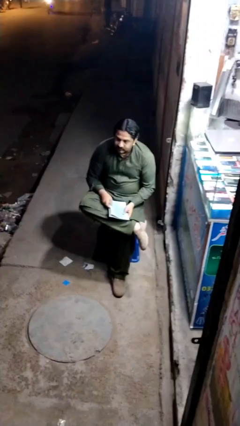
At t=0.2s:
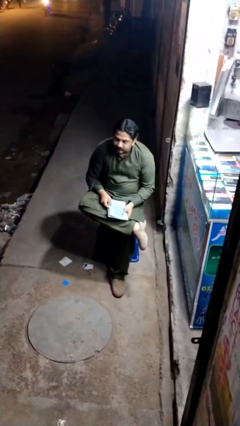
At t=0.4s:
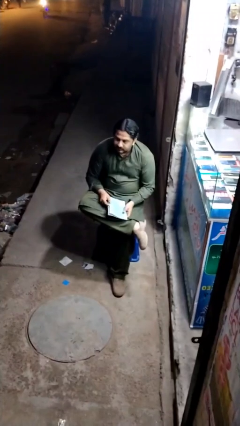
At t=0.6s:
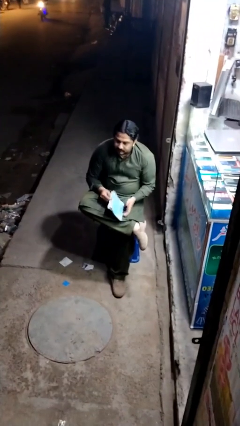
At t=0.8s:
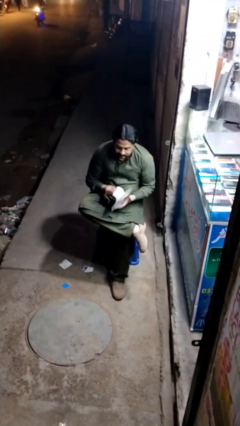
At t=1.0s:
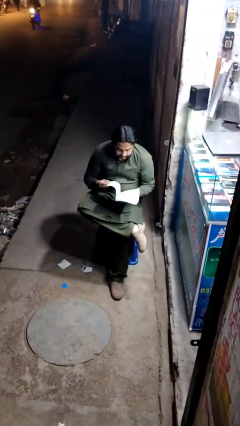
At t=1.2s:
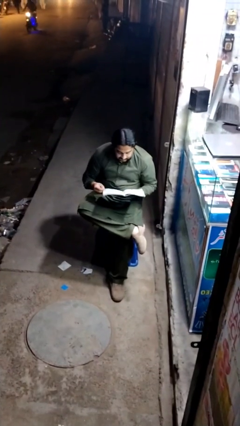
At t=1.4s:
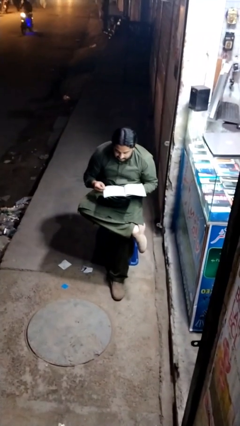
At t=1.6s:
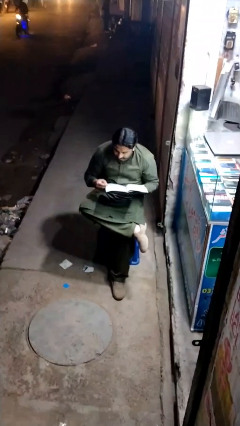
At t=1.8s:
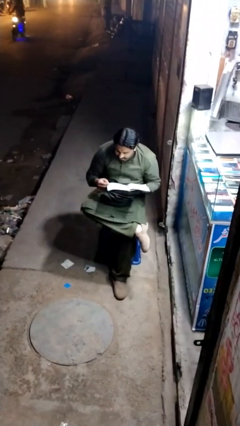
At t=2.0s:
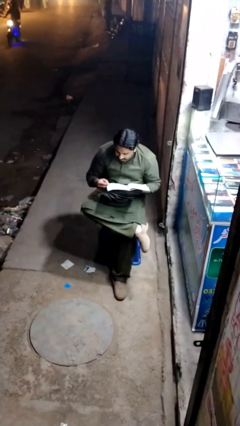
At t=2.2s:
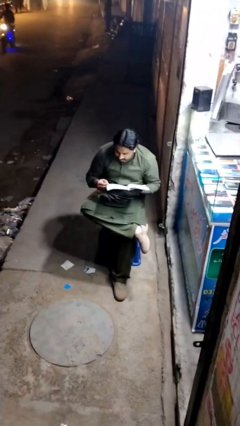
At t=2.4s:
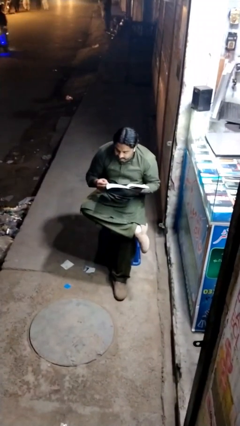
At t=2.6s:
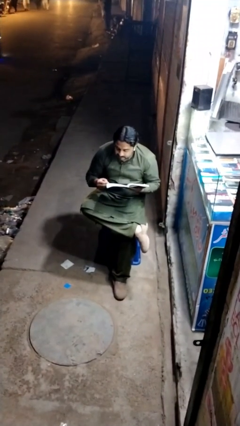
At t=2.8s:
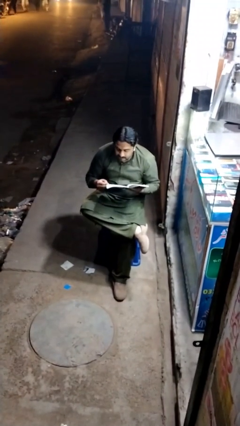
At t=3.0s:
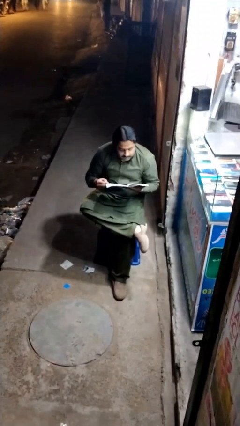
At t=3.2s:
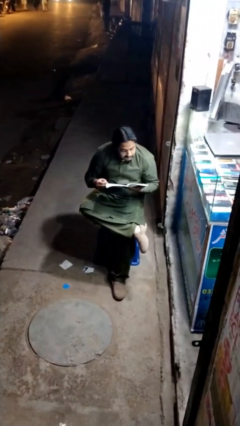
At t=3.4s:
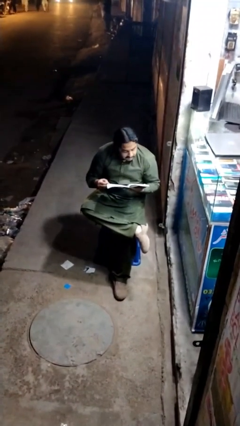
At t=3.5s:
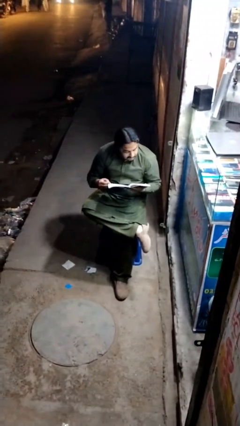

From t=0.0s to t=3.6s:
person reads document

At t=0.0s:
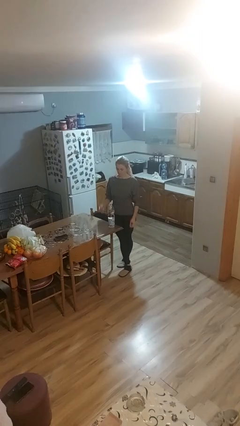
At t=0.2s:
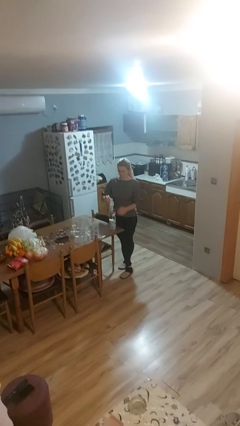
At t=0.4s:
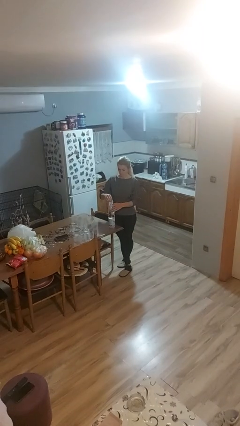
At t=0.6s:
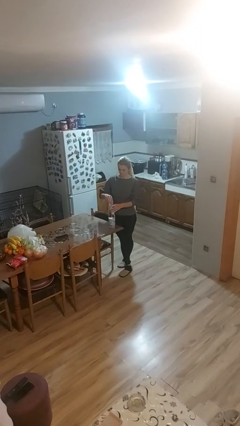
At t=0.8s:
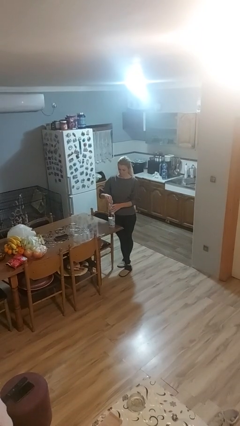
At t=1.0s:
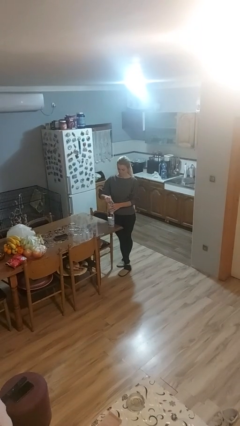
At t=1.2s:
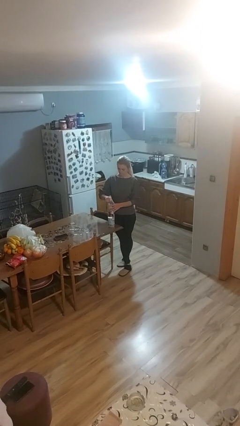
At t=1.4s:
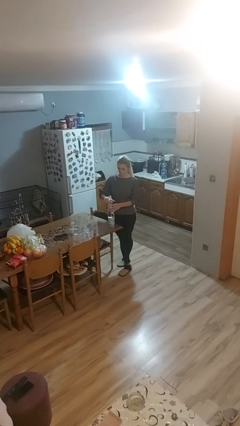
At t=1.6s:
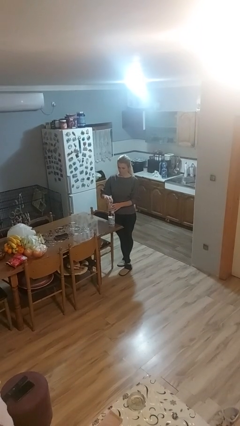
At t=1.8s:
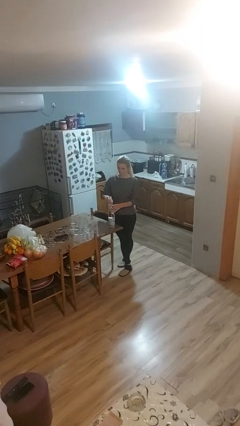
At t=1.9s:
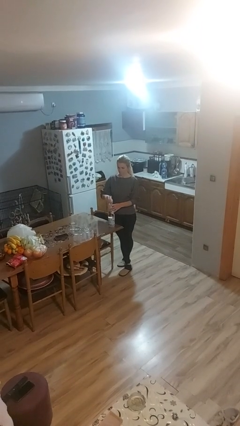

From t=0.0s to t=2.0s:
person screws lid to bottle

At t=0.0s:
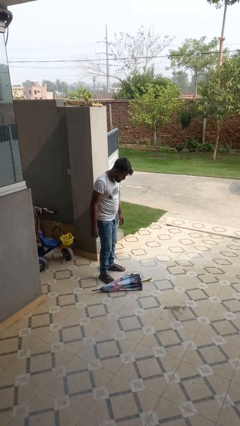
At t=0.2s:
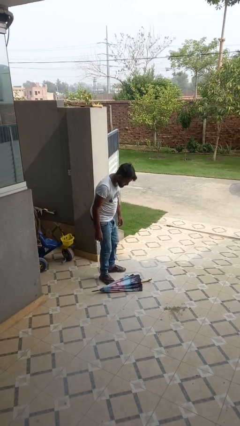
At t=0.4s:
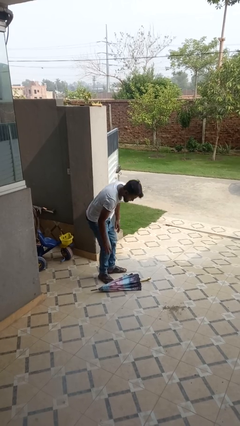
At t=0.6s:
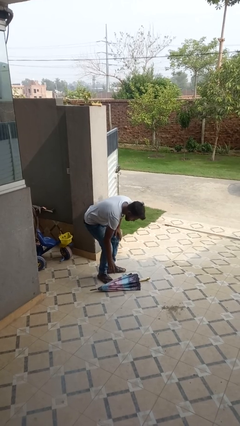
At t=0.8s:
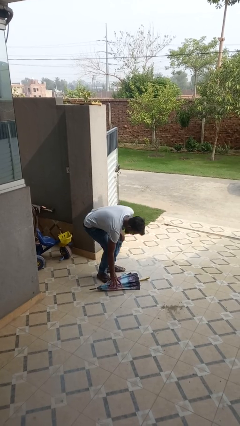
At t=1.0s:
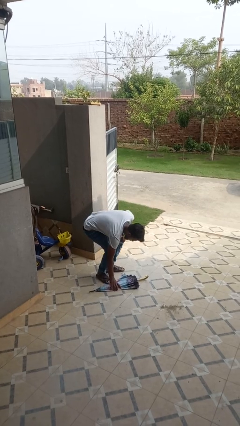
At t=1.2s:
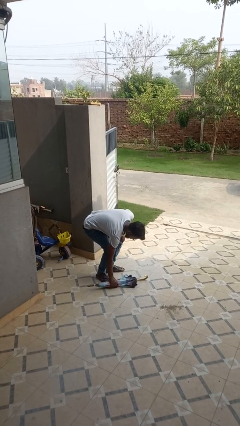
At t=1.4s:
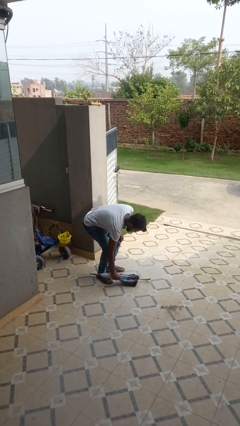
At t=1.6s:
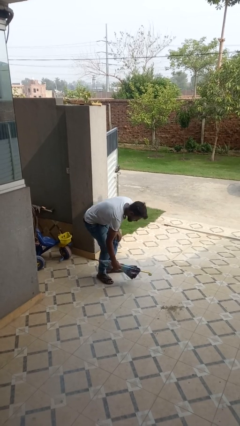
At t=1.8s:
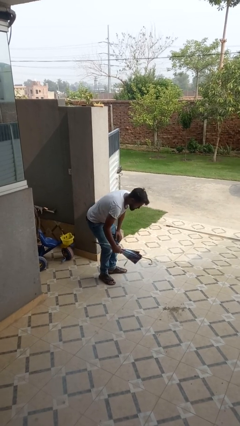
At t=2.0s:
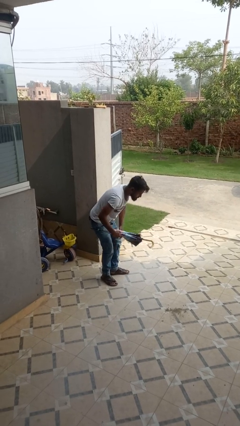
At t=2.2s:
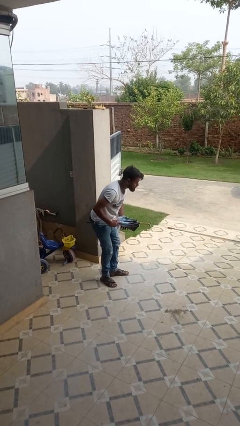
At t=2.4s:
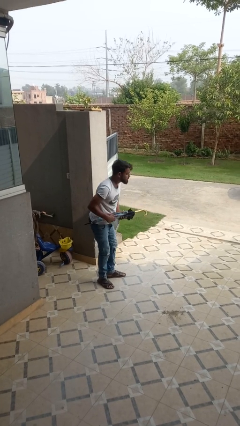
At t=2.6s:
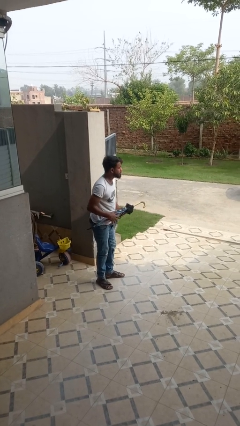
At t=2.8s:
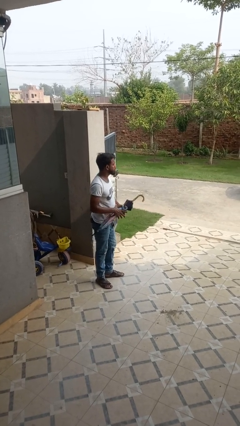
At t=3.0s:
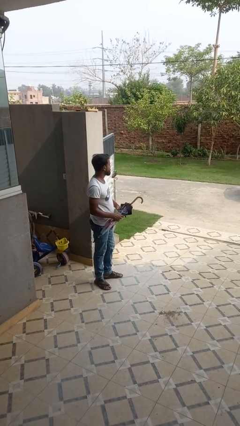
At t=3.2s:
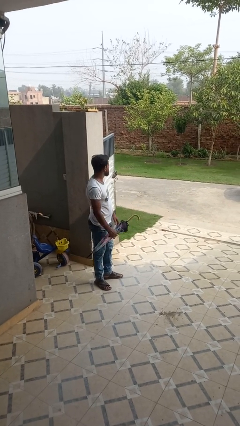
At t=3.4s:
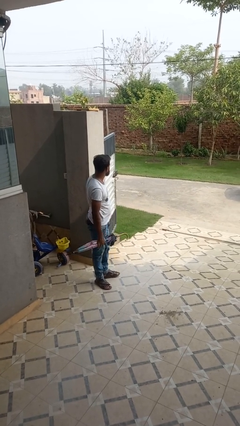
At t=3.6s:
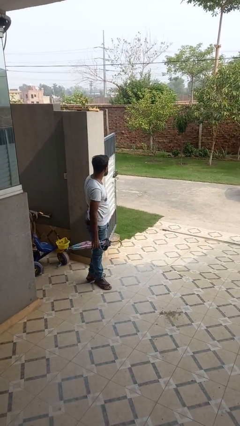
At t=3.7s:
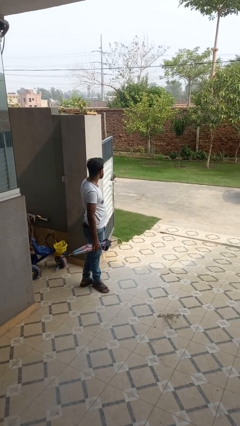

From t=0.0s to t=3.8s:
person picks up object from floor

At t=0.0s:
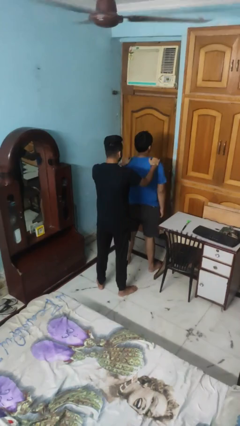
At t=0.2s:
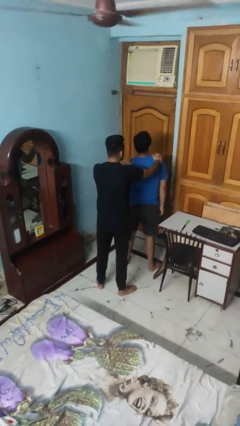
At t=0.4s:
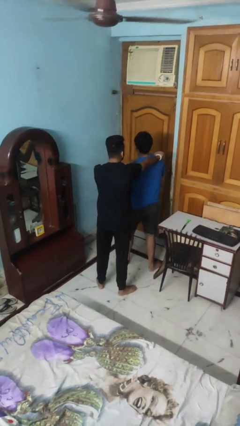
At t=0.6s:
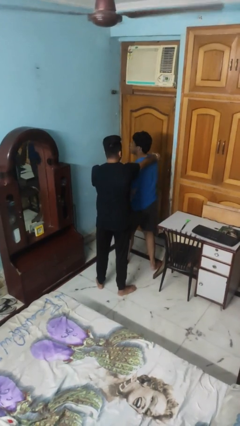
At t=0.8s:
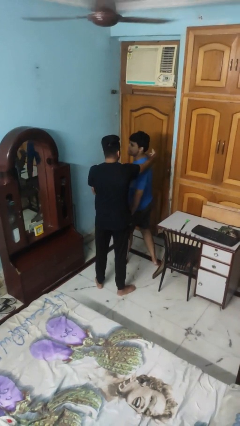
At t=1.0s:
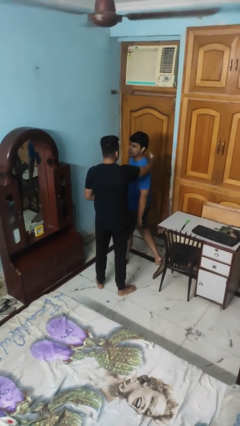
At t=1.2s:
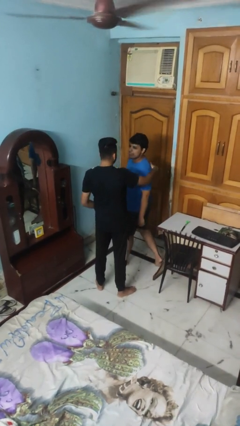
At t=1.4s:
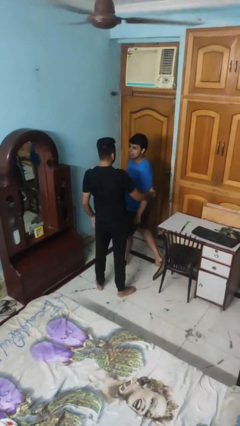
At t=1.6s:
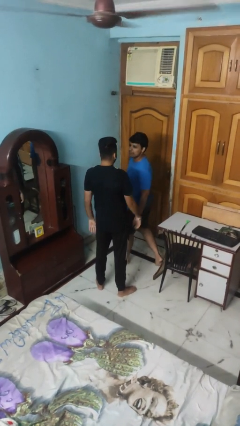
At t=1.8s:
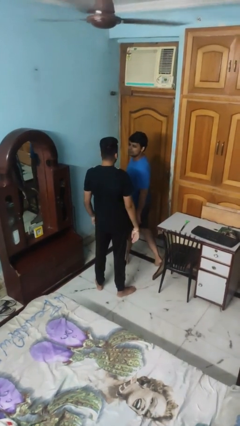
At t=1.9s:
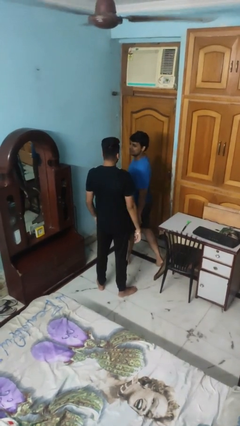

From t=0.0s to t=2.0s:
person spins person around

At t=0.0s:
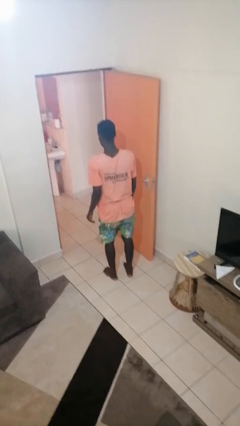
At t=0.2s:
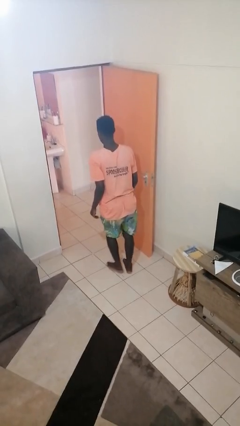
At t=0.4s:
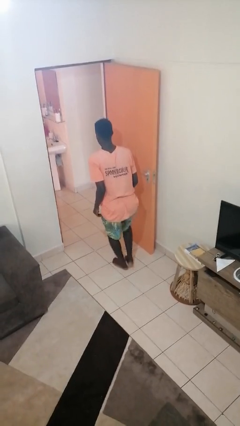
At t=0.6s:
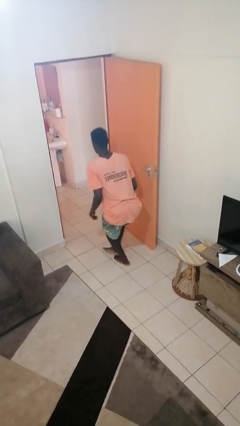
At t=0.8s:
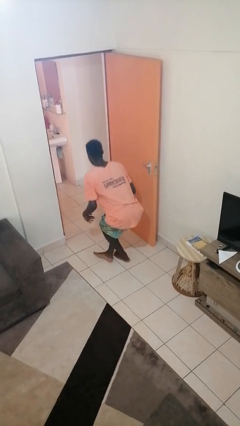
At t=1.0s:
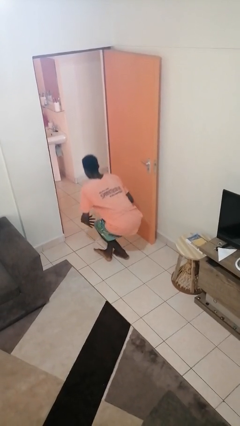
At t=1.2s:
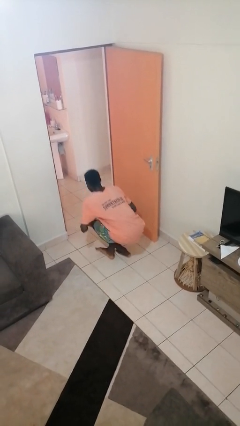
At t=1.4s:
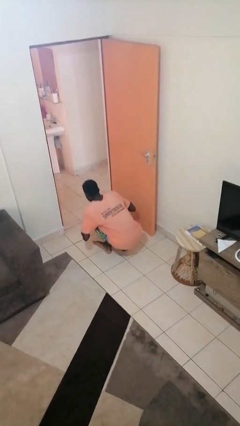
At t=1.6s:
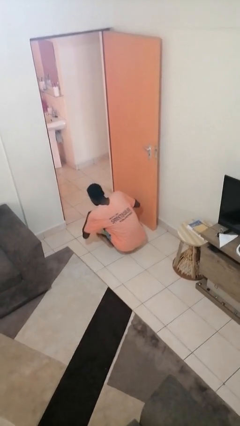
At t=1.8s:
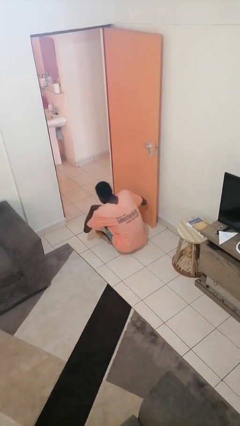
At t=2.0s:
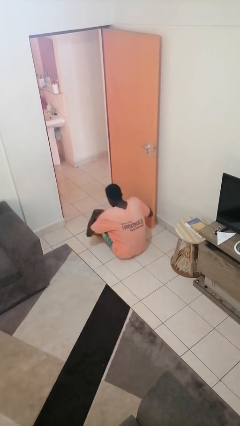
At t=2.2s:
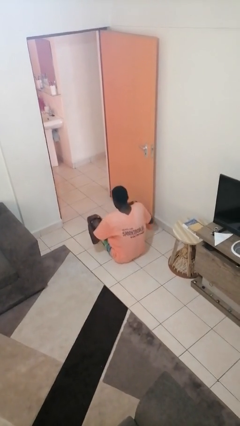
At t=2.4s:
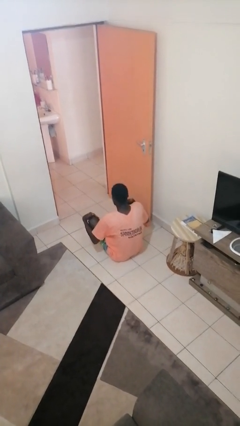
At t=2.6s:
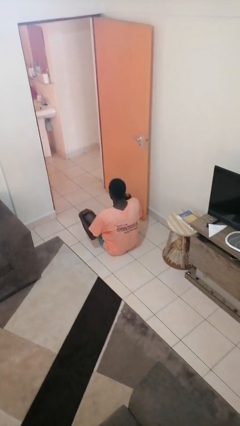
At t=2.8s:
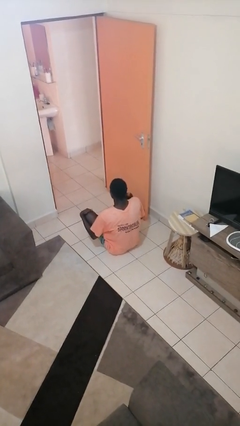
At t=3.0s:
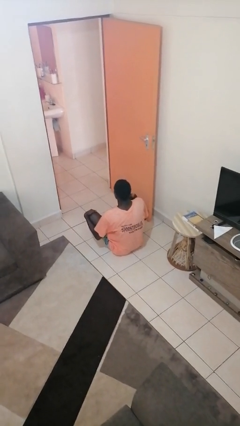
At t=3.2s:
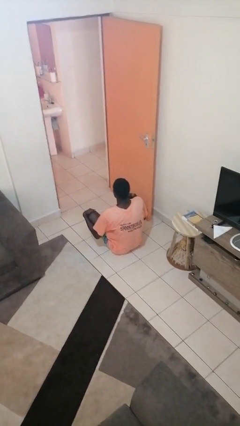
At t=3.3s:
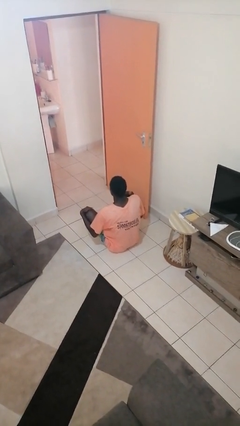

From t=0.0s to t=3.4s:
person sits crisscross

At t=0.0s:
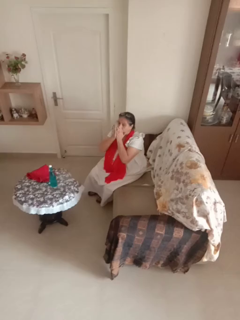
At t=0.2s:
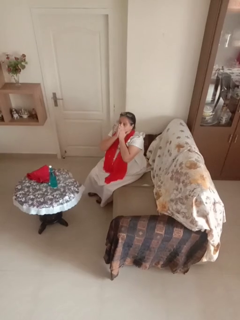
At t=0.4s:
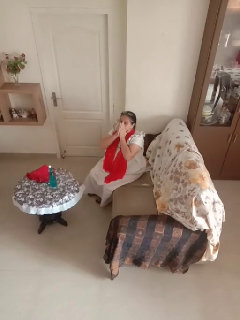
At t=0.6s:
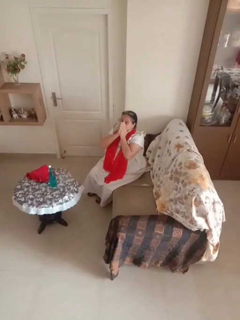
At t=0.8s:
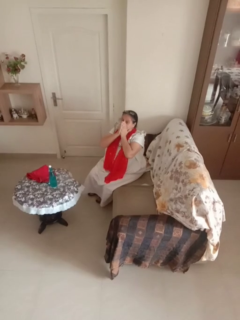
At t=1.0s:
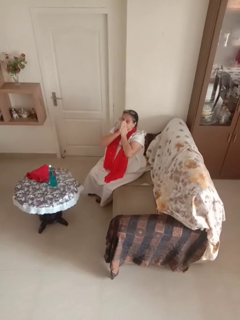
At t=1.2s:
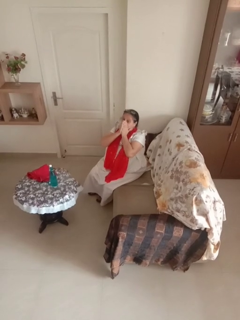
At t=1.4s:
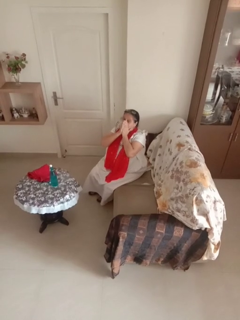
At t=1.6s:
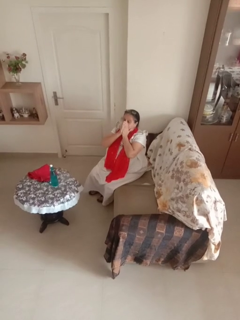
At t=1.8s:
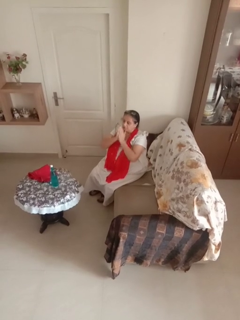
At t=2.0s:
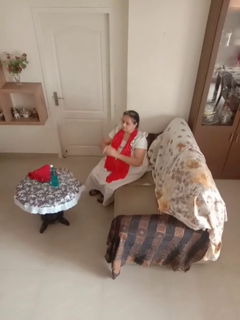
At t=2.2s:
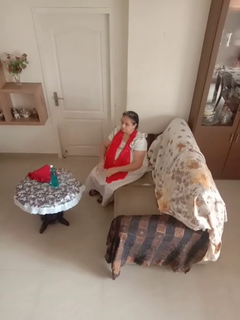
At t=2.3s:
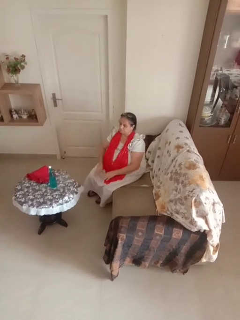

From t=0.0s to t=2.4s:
person covers face with hands

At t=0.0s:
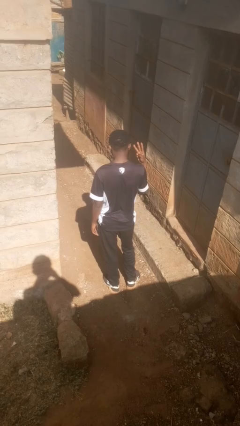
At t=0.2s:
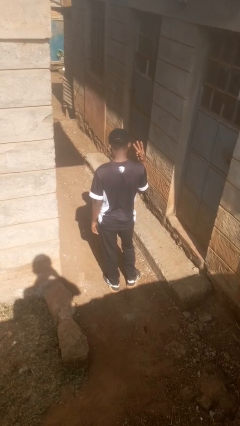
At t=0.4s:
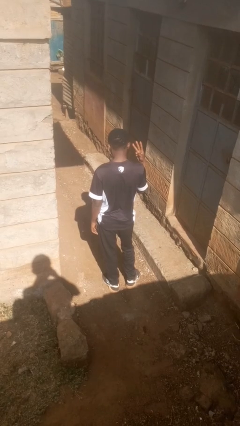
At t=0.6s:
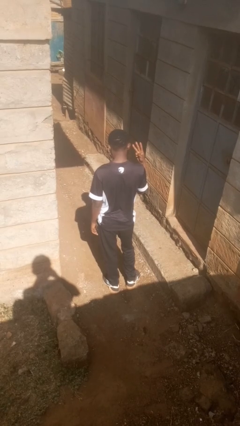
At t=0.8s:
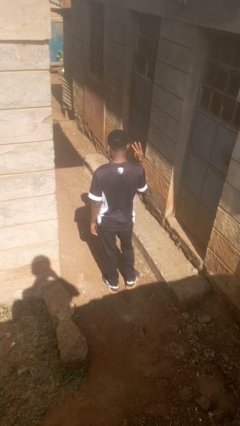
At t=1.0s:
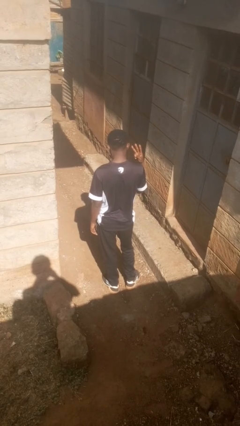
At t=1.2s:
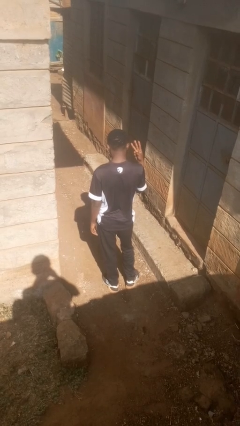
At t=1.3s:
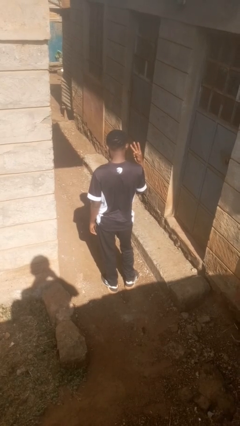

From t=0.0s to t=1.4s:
person gestures number three
